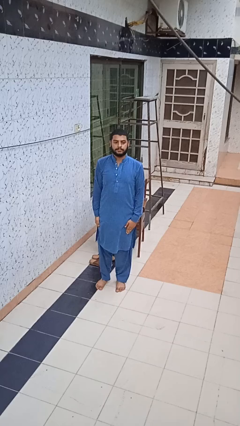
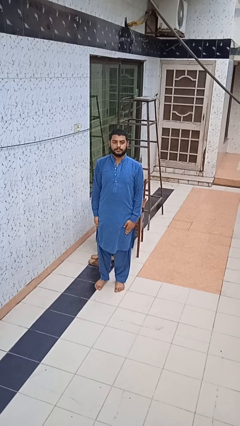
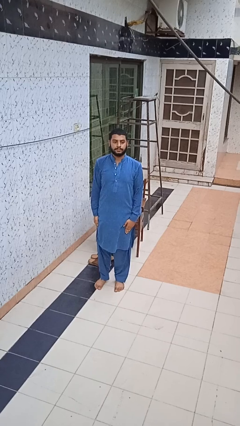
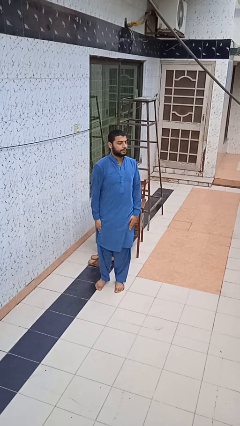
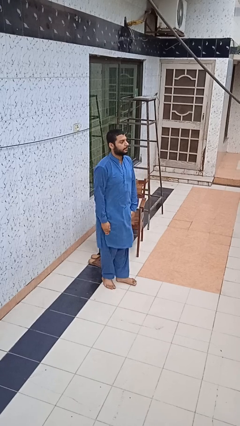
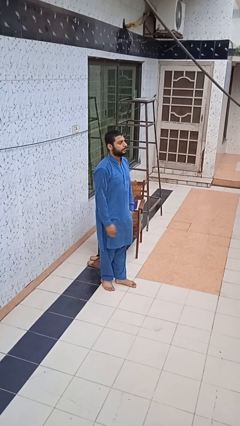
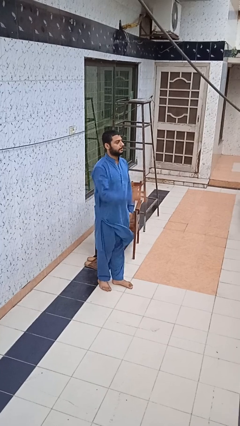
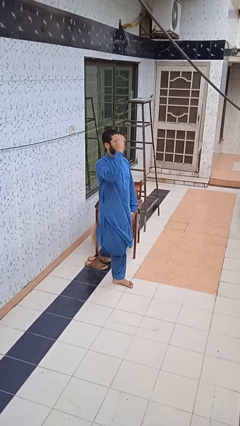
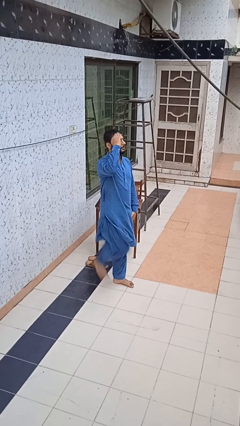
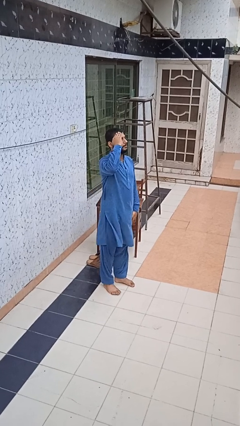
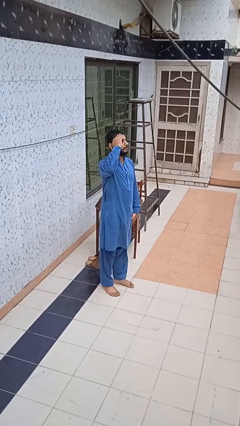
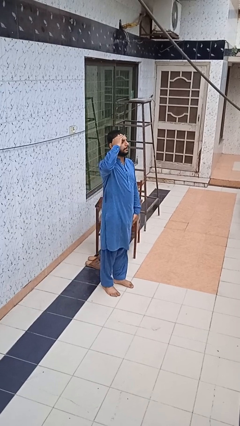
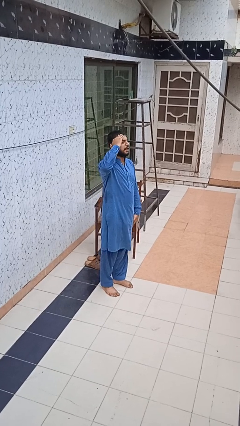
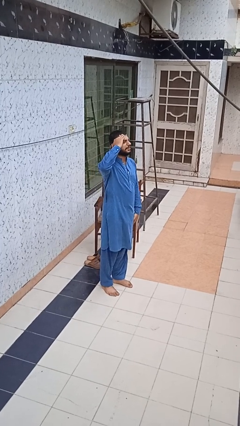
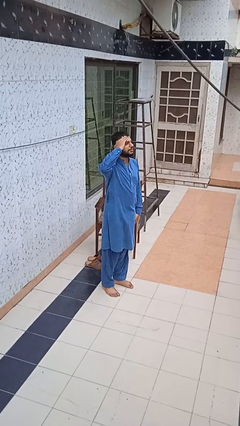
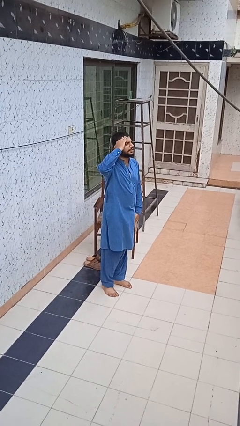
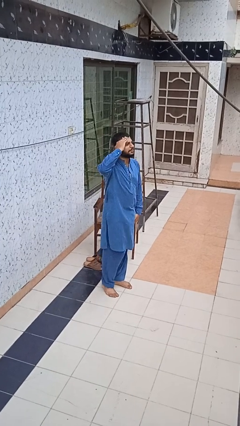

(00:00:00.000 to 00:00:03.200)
person salutes

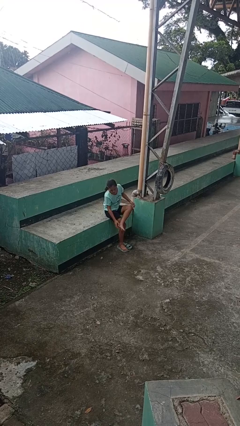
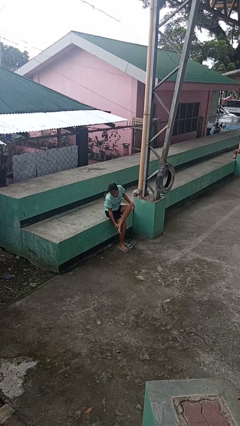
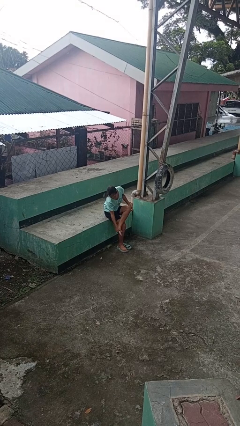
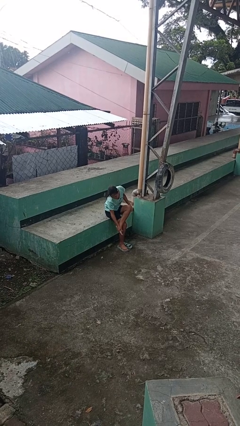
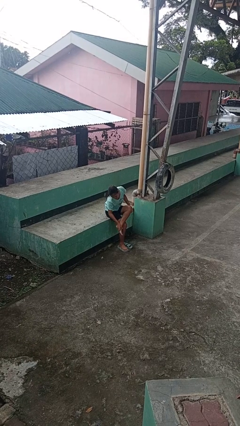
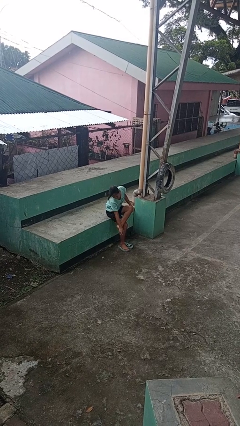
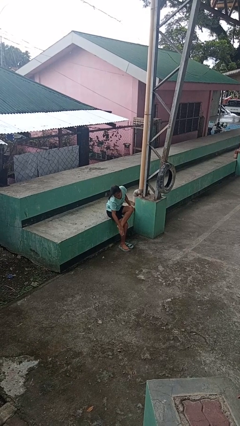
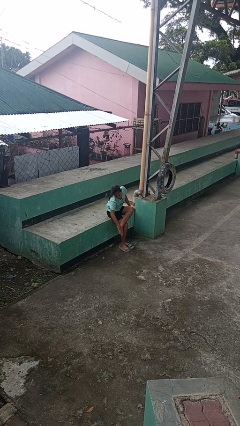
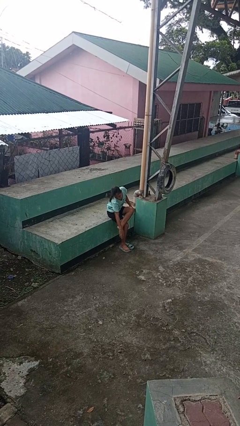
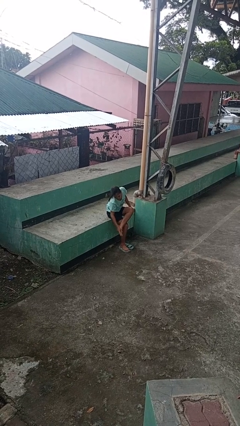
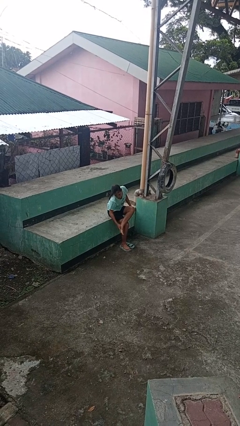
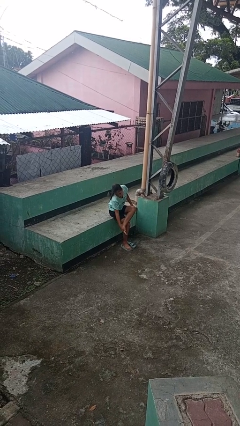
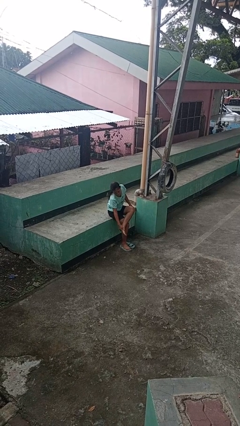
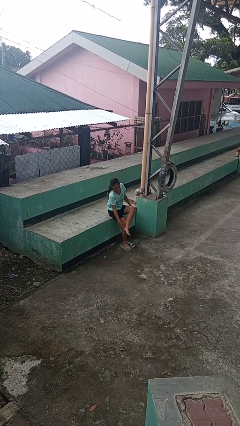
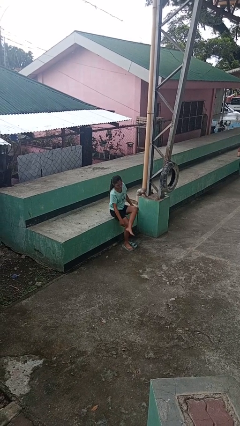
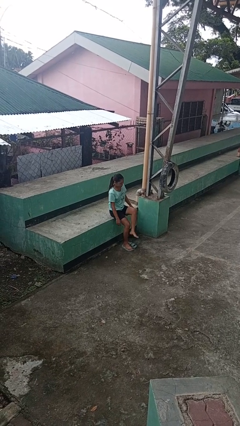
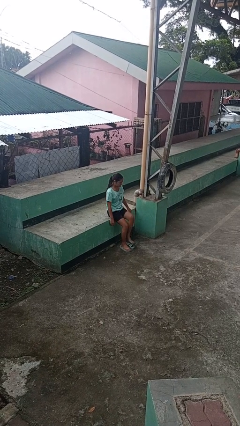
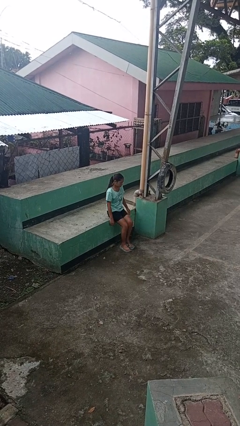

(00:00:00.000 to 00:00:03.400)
person rubs foot

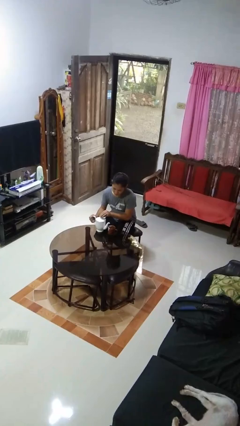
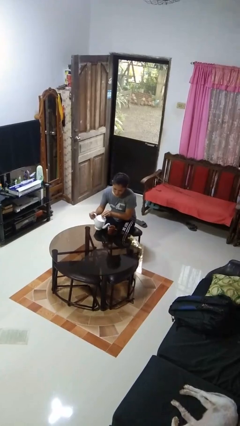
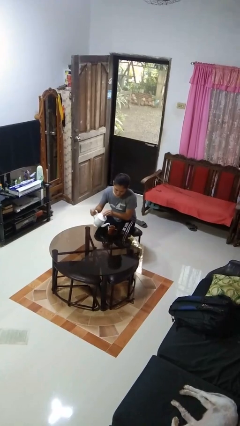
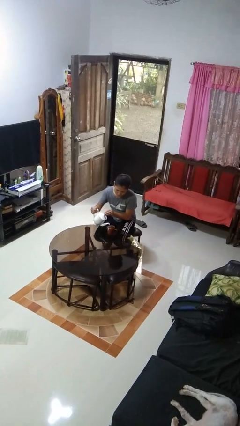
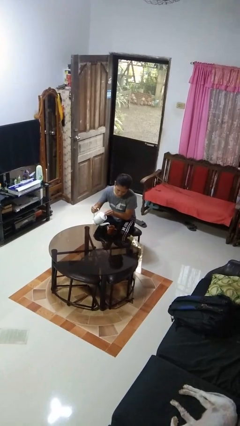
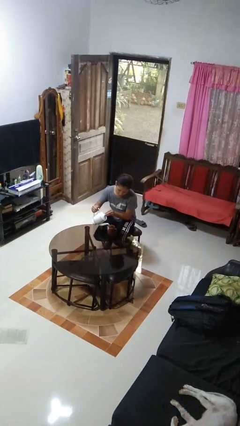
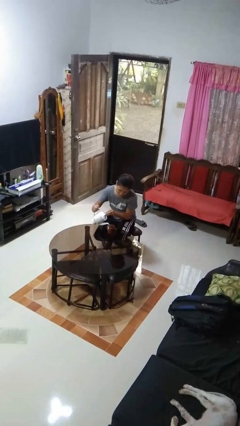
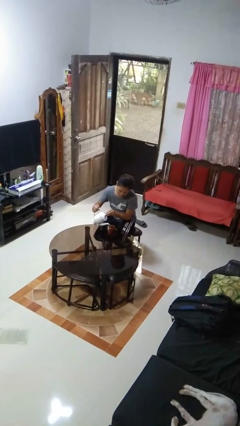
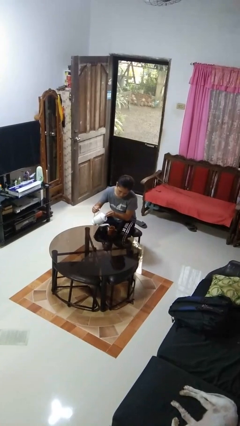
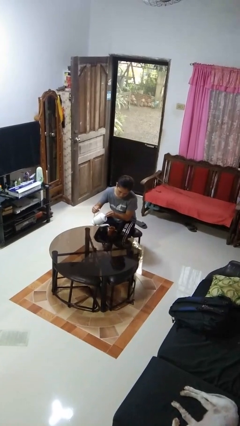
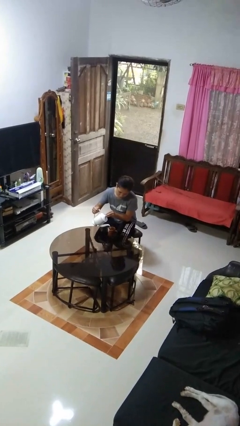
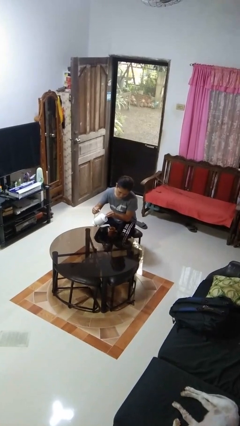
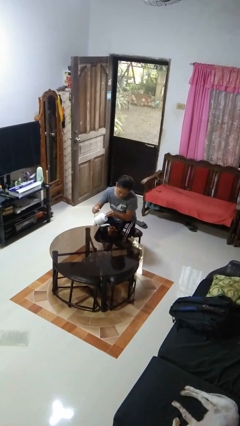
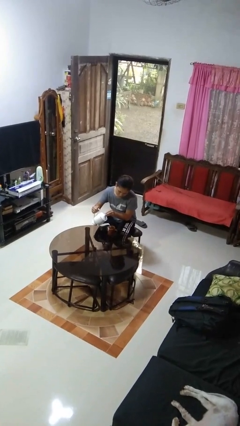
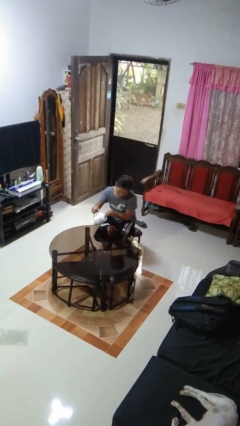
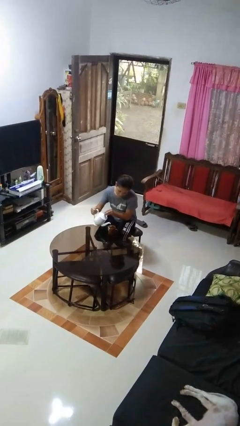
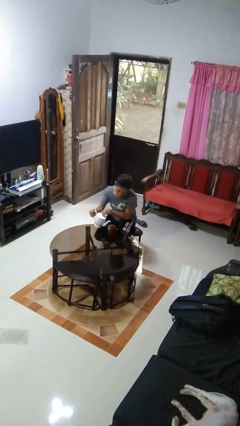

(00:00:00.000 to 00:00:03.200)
person pours coffee into mug

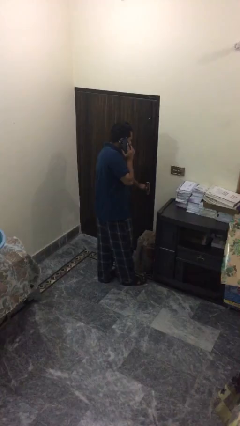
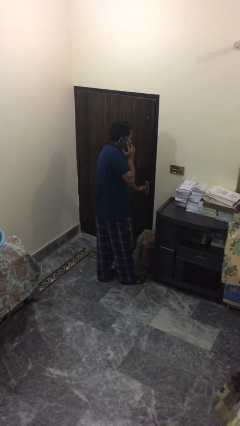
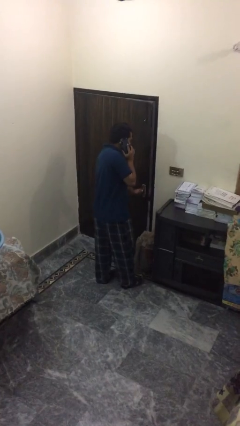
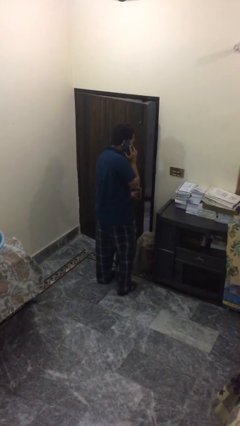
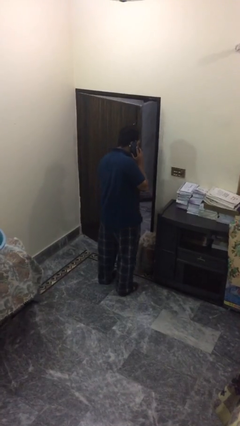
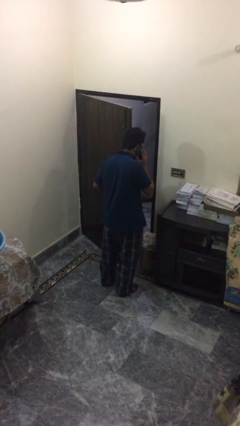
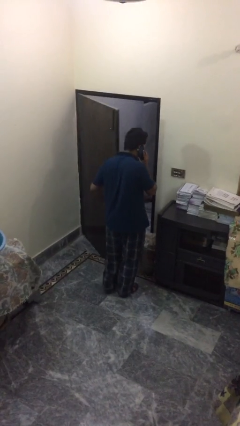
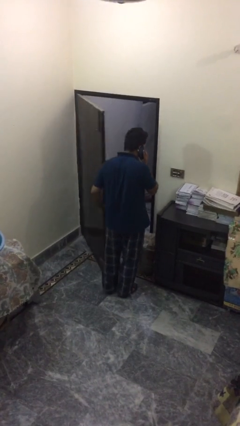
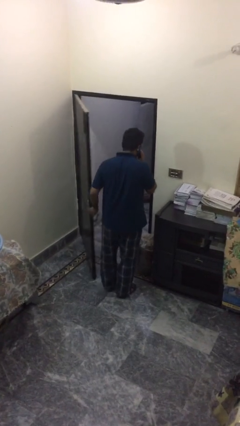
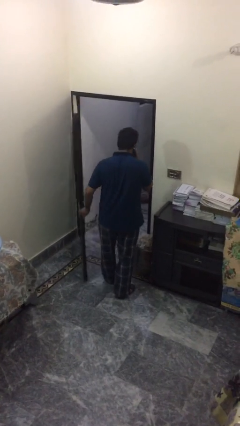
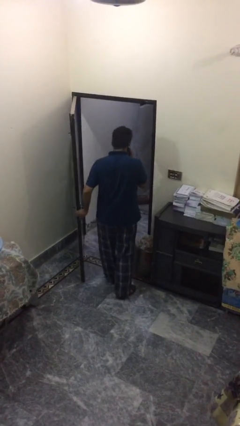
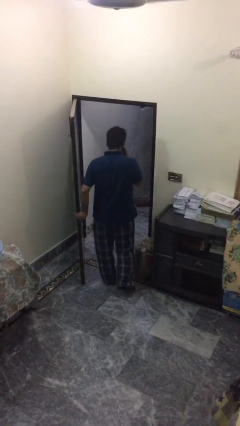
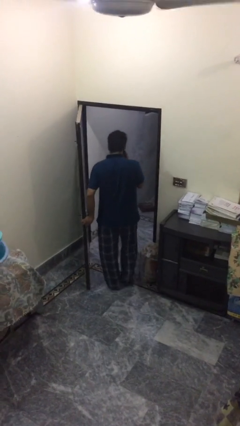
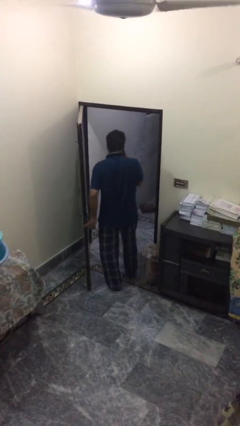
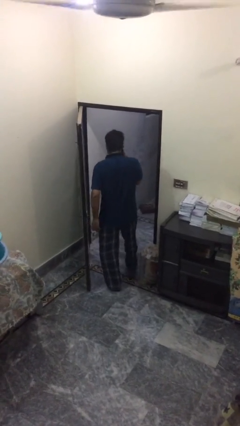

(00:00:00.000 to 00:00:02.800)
person opens facility door

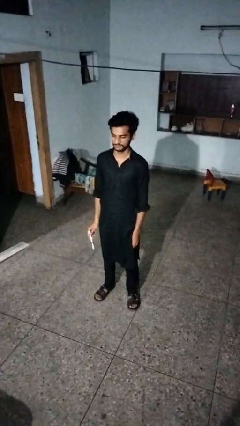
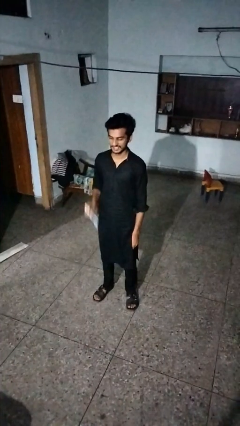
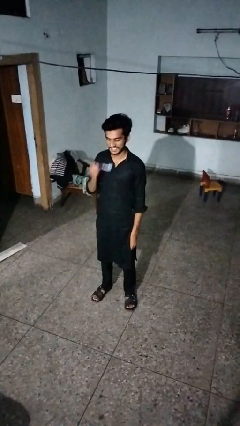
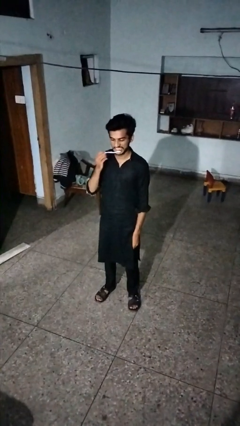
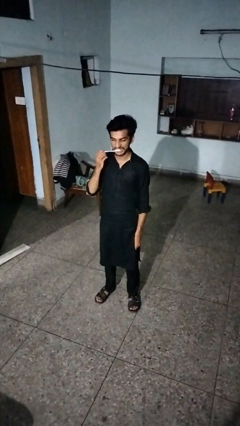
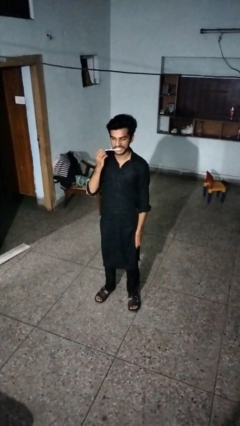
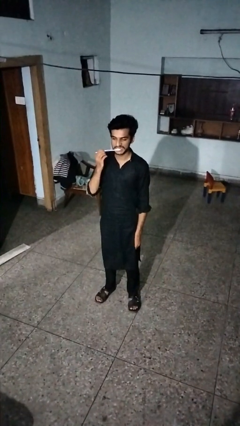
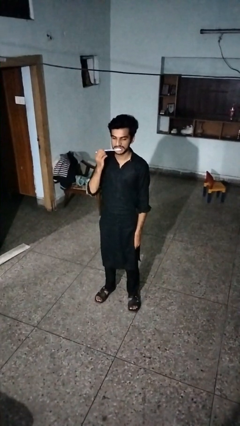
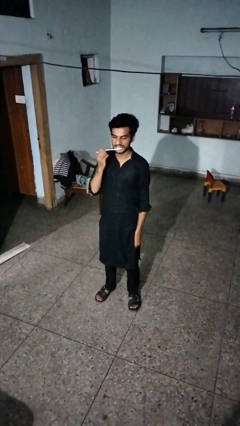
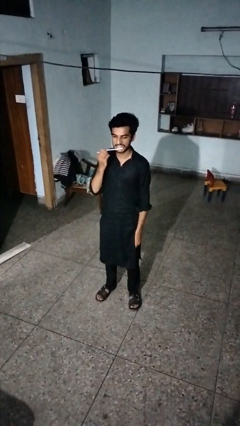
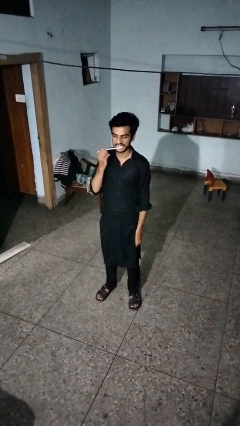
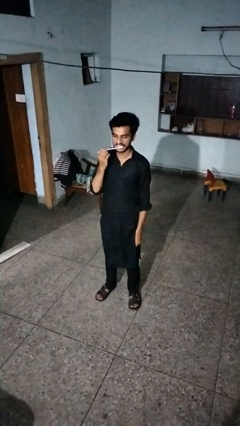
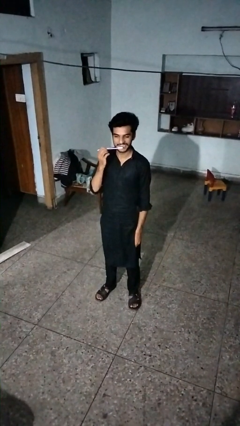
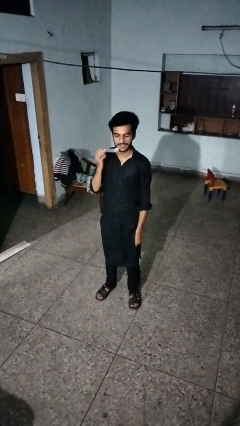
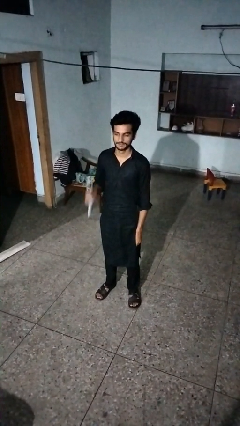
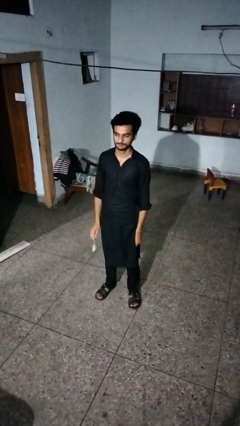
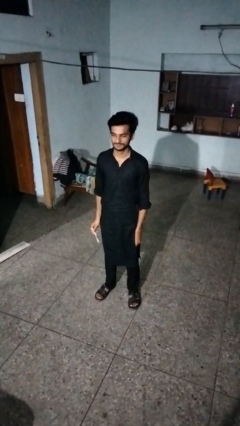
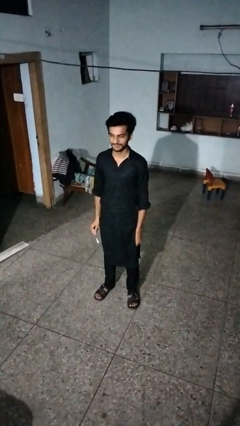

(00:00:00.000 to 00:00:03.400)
person brushes teeth

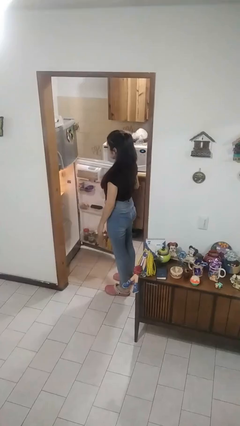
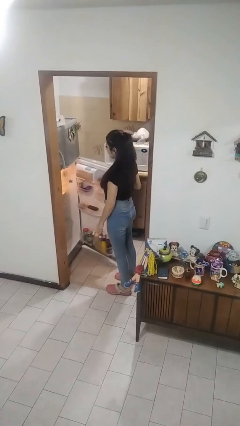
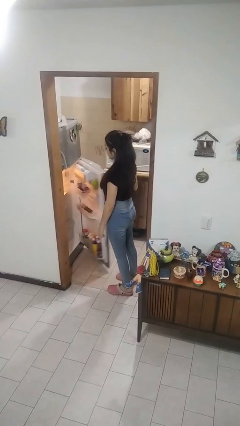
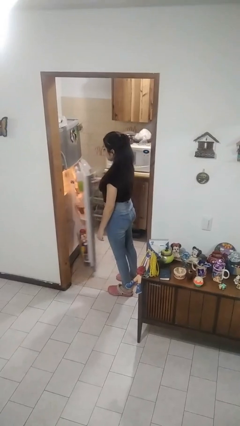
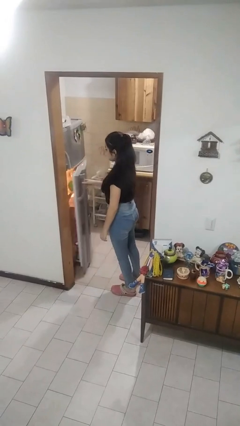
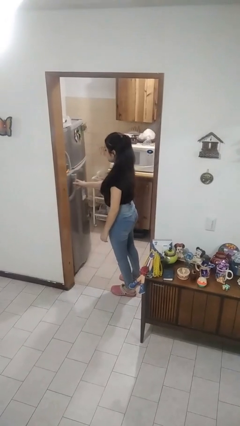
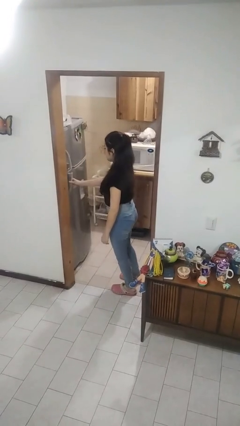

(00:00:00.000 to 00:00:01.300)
person closes refrigerator
